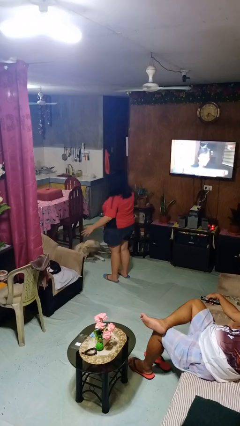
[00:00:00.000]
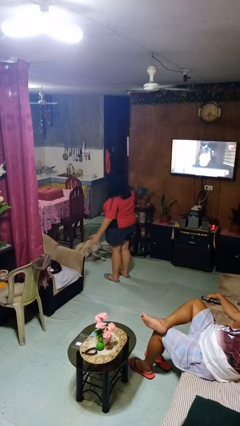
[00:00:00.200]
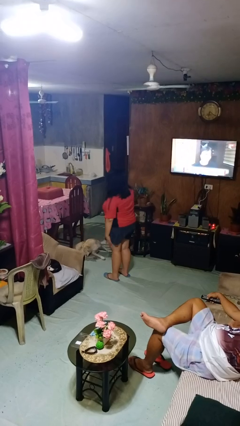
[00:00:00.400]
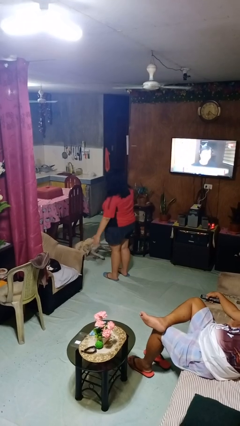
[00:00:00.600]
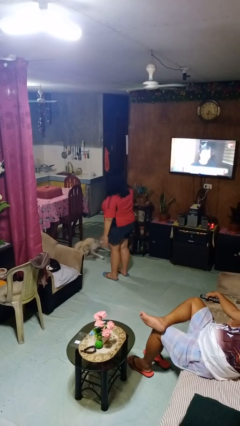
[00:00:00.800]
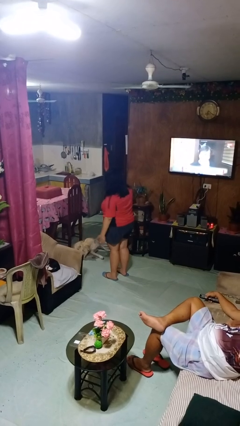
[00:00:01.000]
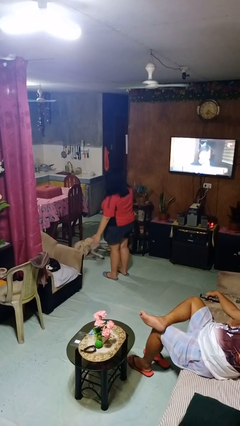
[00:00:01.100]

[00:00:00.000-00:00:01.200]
person slaps hands on thighs

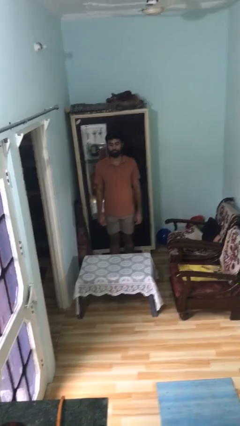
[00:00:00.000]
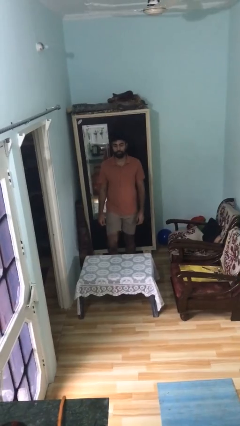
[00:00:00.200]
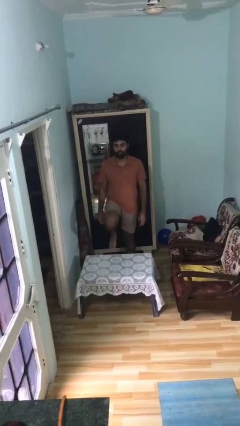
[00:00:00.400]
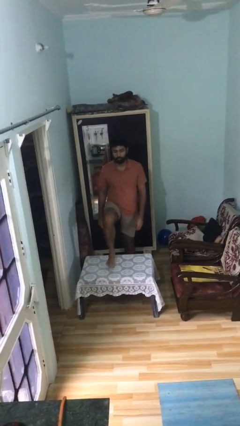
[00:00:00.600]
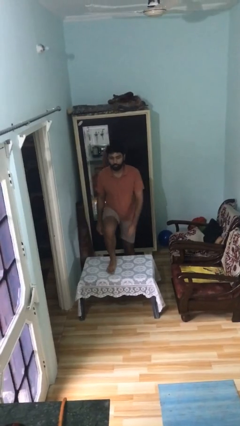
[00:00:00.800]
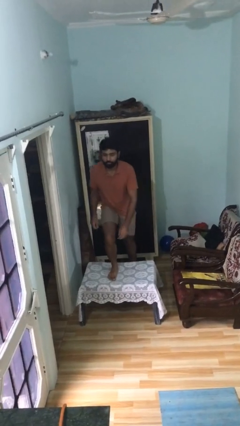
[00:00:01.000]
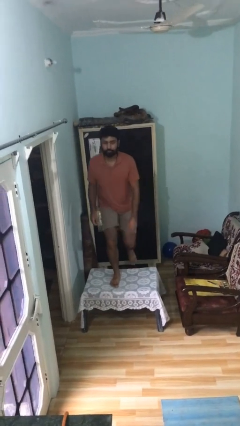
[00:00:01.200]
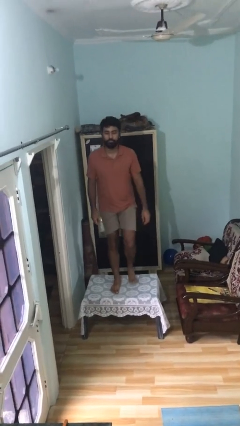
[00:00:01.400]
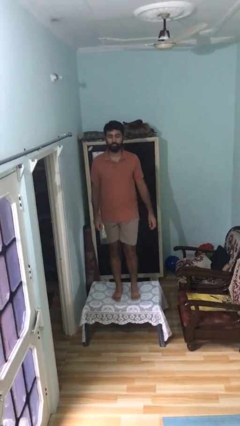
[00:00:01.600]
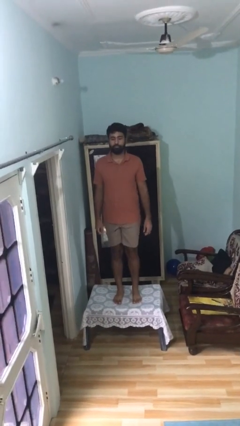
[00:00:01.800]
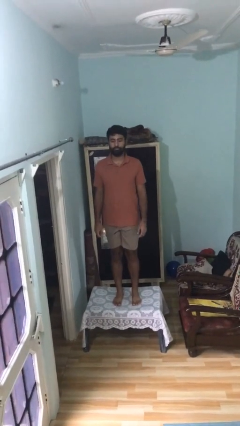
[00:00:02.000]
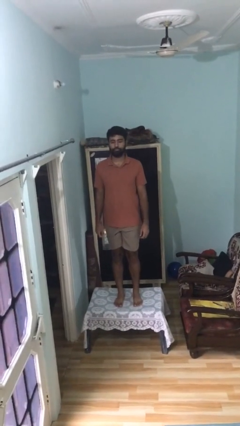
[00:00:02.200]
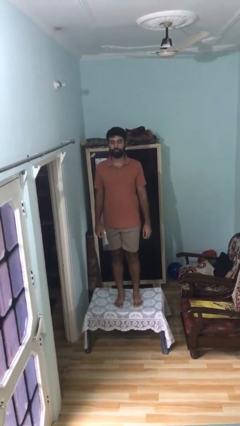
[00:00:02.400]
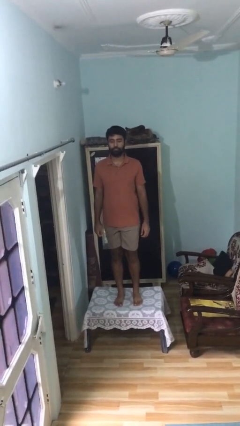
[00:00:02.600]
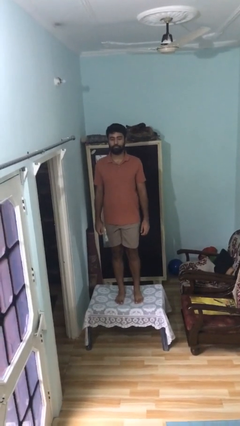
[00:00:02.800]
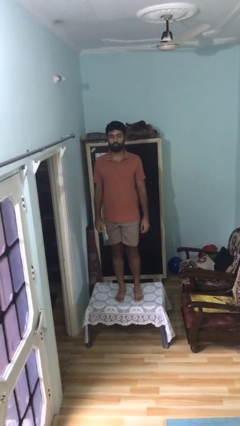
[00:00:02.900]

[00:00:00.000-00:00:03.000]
person climbs on table

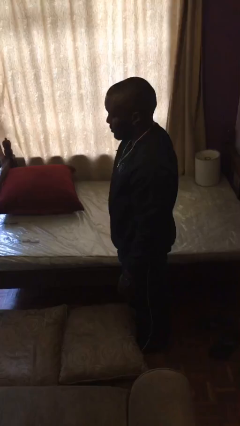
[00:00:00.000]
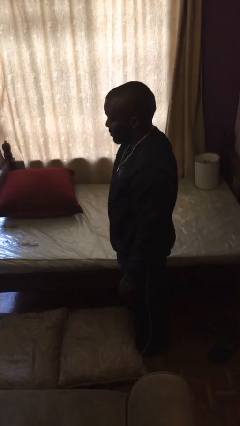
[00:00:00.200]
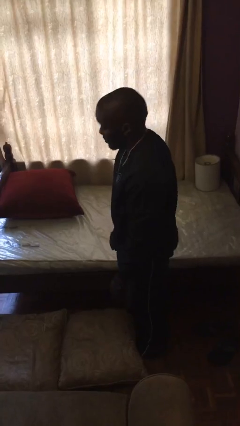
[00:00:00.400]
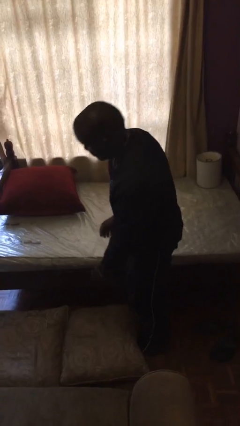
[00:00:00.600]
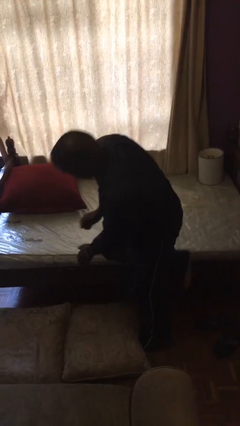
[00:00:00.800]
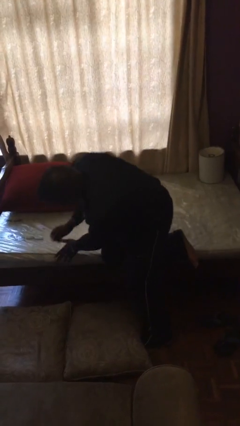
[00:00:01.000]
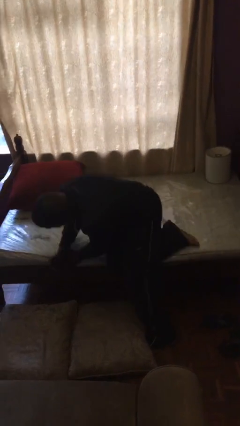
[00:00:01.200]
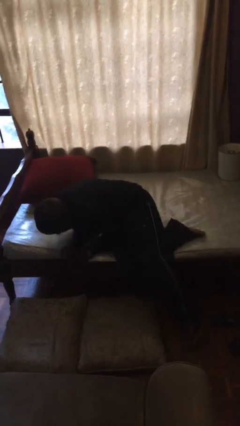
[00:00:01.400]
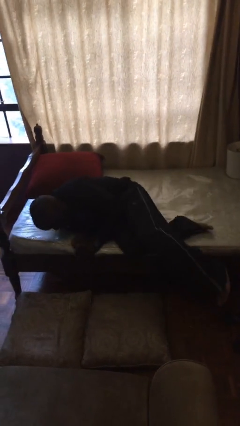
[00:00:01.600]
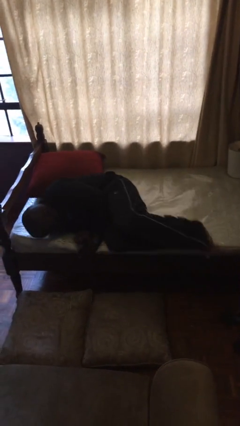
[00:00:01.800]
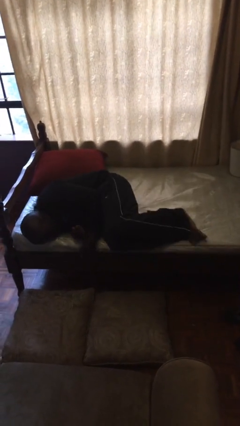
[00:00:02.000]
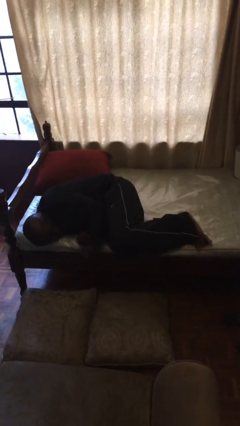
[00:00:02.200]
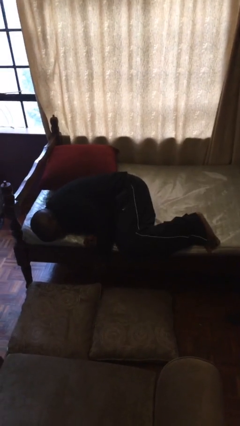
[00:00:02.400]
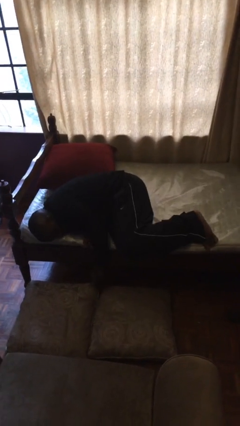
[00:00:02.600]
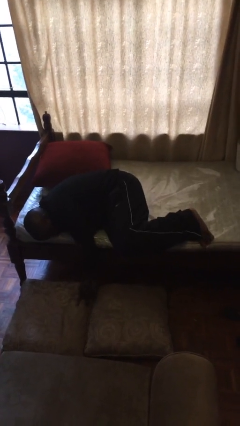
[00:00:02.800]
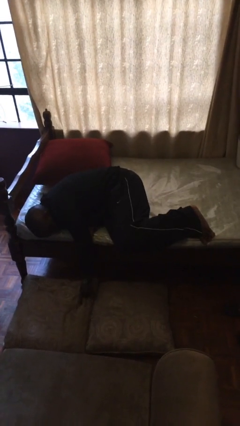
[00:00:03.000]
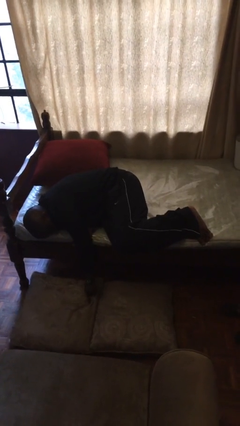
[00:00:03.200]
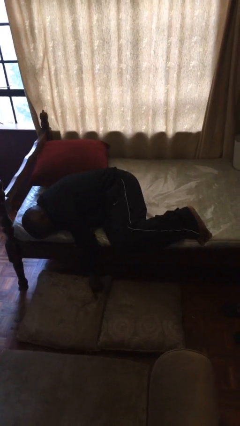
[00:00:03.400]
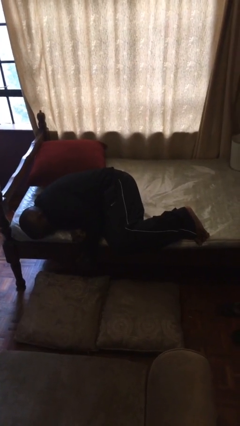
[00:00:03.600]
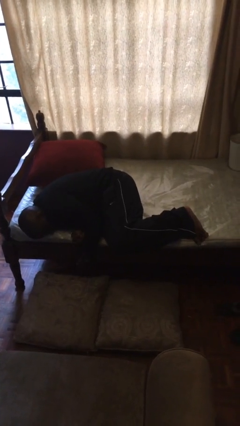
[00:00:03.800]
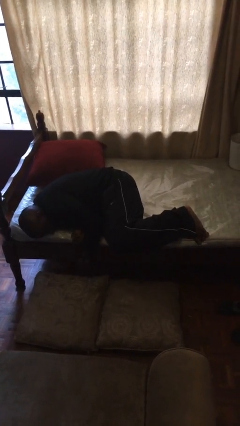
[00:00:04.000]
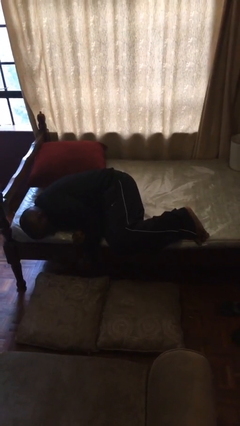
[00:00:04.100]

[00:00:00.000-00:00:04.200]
person lies down on bed

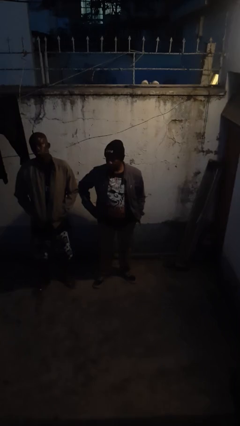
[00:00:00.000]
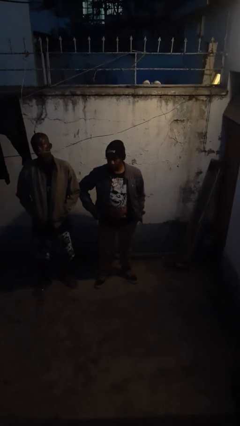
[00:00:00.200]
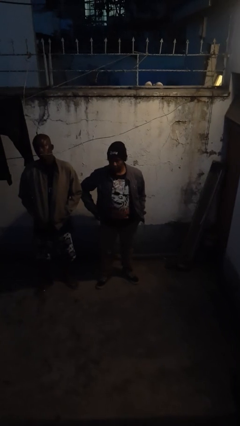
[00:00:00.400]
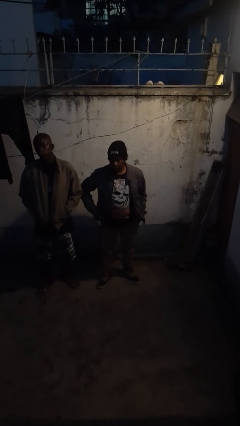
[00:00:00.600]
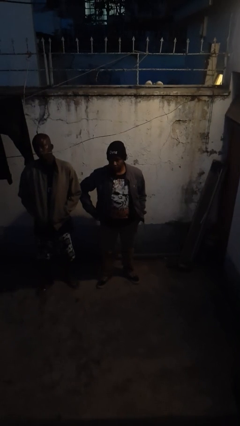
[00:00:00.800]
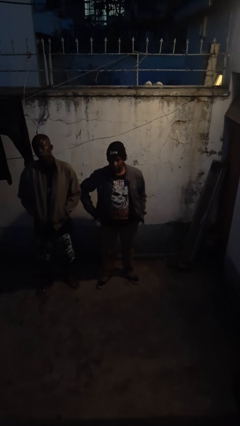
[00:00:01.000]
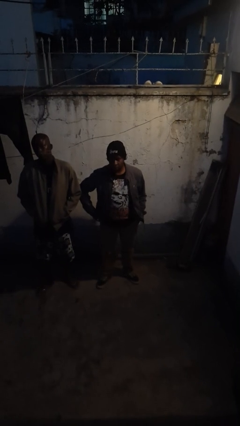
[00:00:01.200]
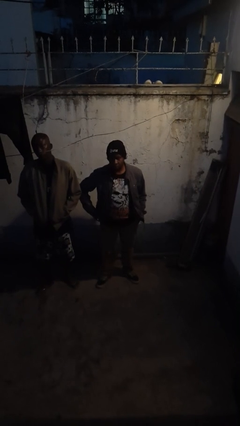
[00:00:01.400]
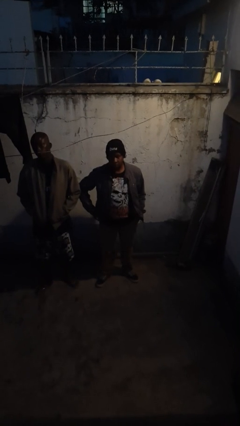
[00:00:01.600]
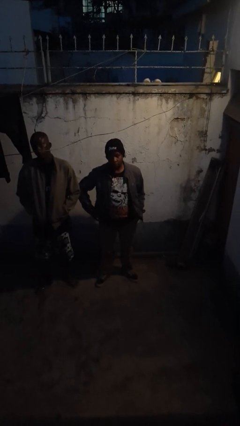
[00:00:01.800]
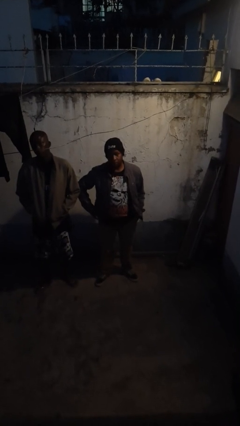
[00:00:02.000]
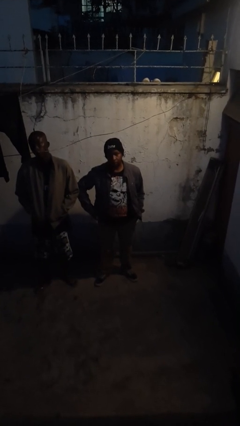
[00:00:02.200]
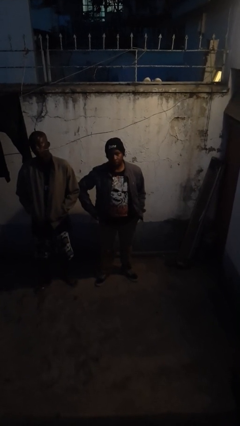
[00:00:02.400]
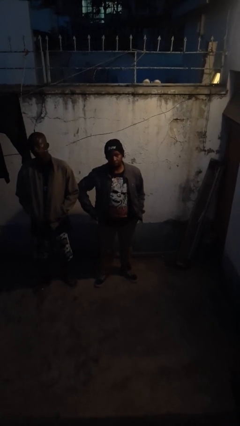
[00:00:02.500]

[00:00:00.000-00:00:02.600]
person nudges person with elbow

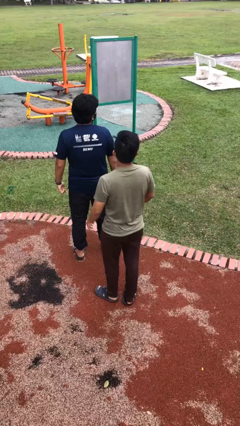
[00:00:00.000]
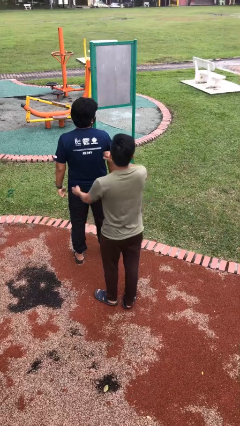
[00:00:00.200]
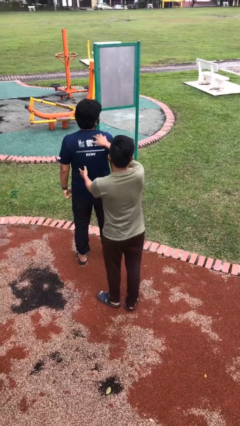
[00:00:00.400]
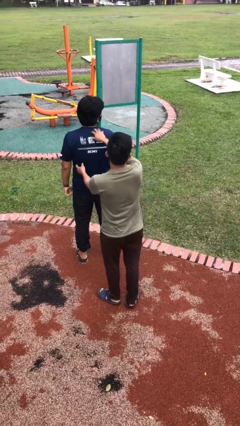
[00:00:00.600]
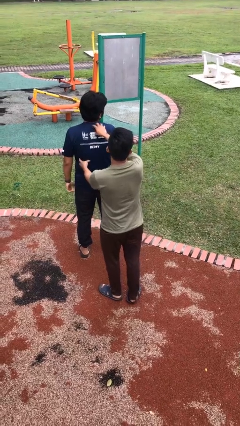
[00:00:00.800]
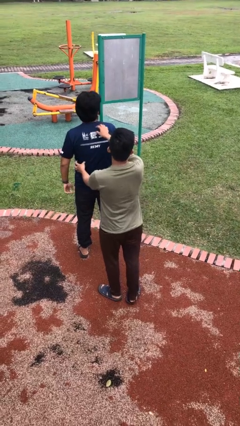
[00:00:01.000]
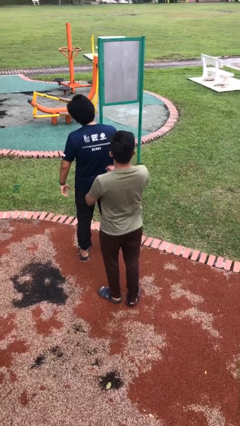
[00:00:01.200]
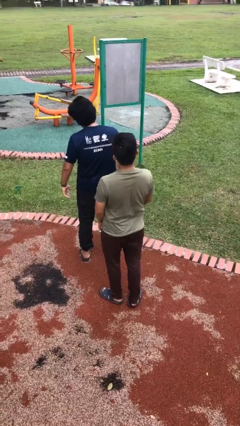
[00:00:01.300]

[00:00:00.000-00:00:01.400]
person tickles person

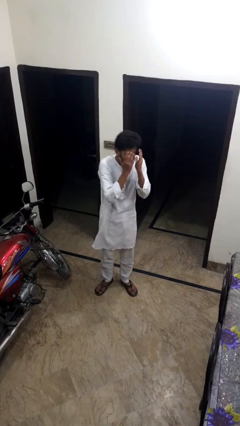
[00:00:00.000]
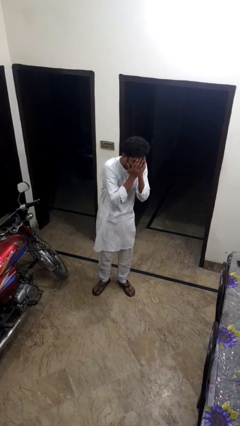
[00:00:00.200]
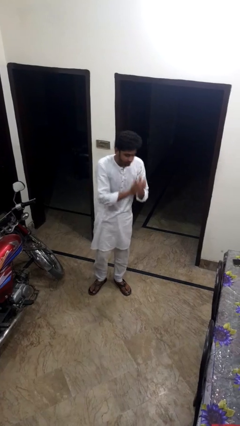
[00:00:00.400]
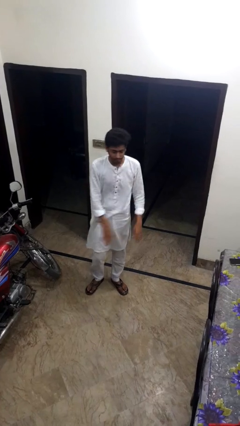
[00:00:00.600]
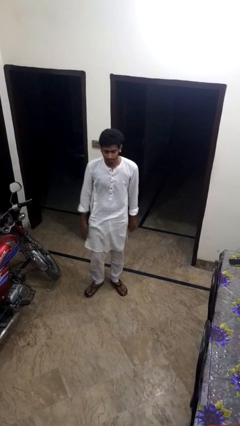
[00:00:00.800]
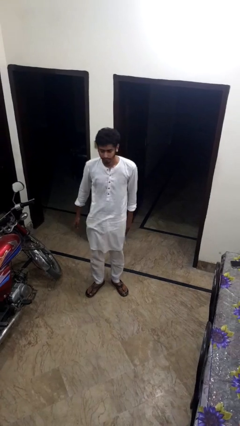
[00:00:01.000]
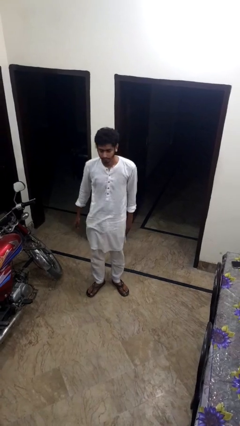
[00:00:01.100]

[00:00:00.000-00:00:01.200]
person sneezes into hand

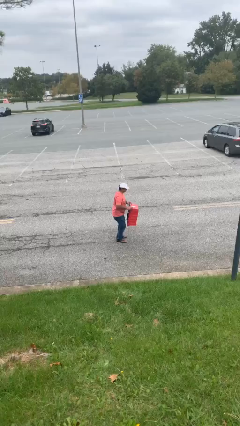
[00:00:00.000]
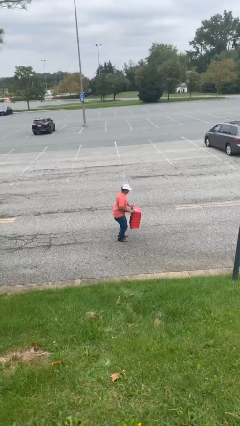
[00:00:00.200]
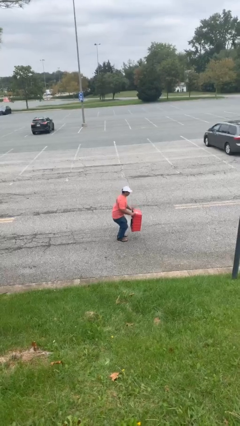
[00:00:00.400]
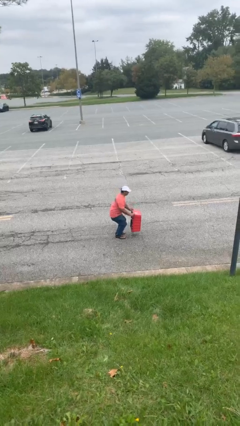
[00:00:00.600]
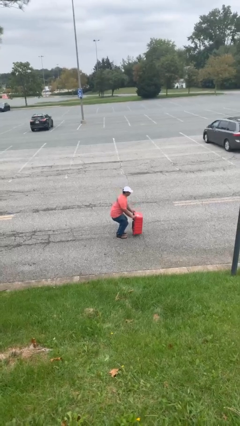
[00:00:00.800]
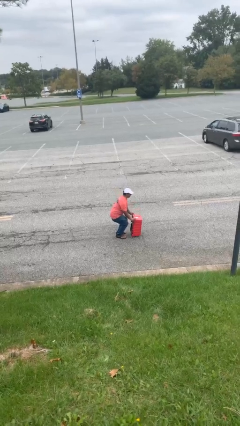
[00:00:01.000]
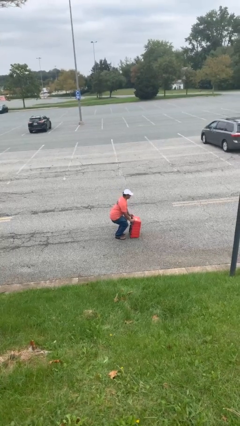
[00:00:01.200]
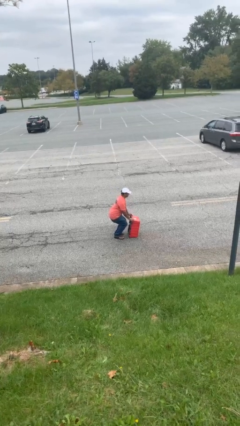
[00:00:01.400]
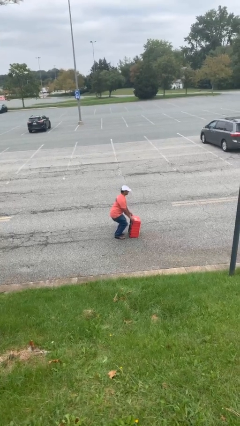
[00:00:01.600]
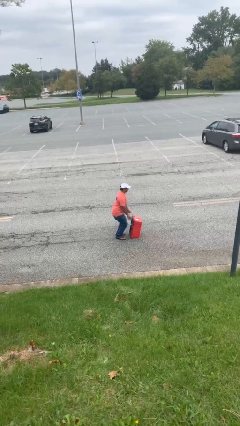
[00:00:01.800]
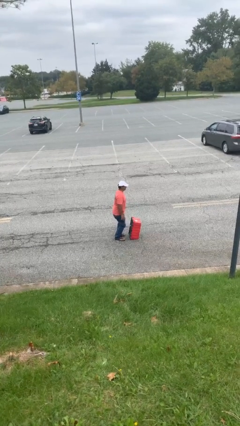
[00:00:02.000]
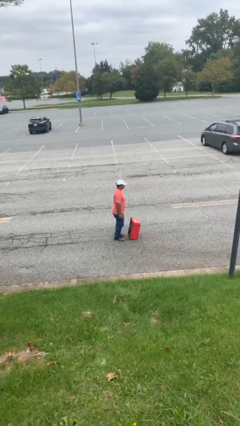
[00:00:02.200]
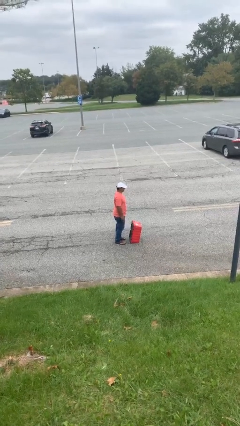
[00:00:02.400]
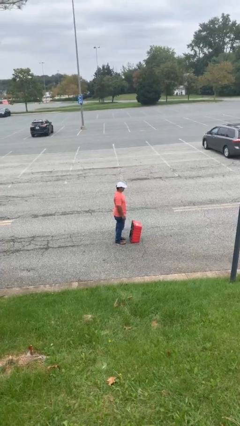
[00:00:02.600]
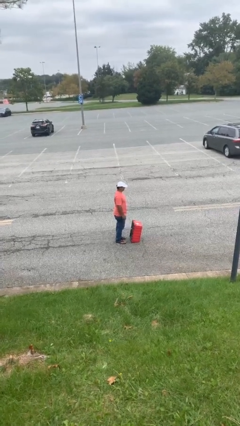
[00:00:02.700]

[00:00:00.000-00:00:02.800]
person puts down object on floor

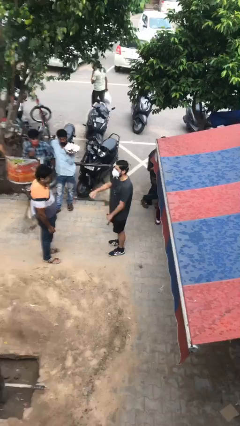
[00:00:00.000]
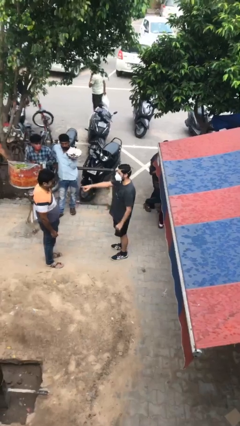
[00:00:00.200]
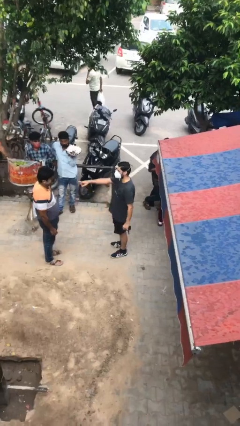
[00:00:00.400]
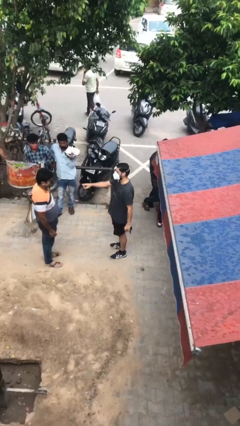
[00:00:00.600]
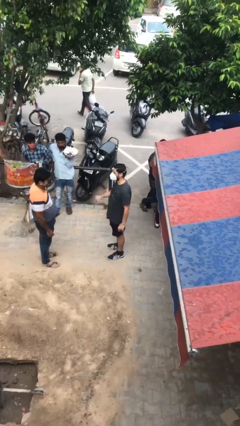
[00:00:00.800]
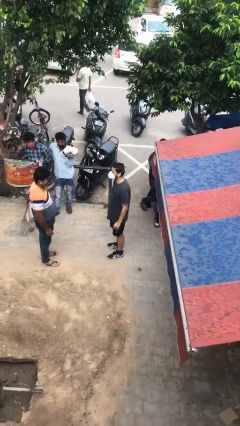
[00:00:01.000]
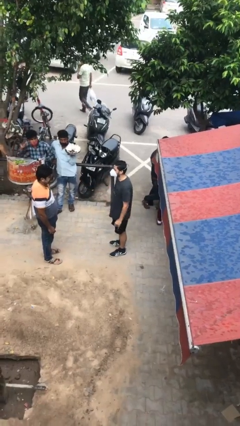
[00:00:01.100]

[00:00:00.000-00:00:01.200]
person points at person
